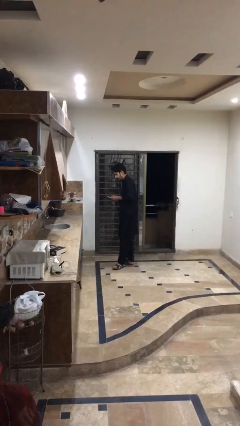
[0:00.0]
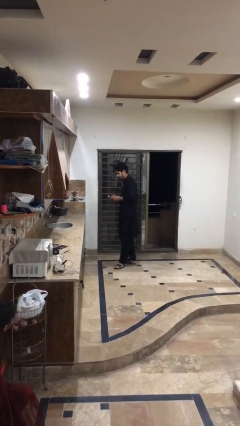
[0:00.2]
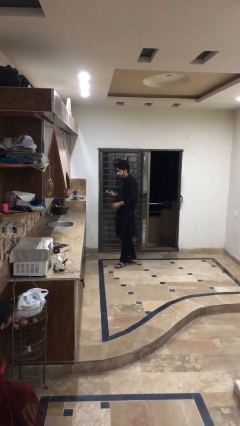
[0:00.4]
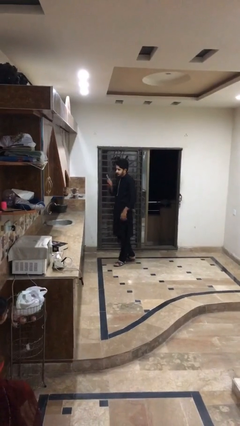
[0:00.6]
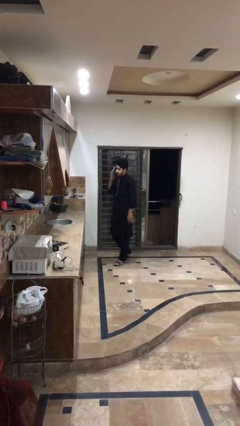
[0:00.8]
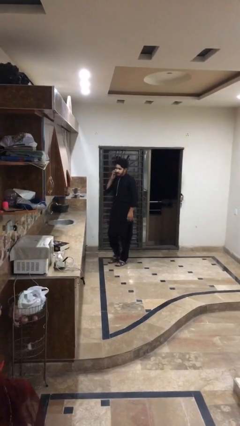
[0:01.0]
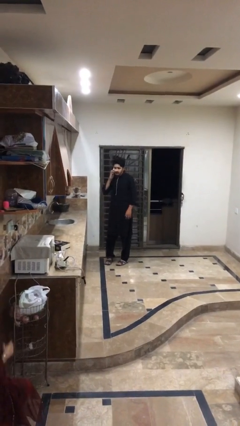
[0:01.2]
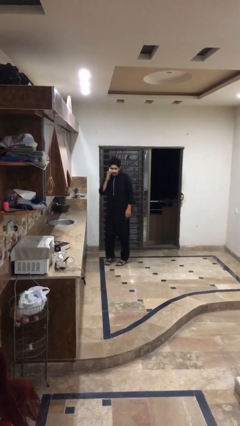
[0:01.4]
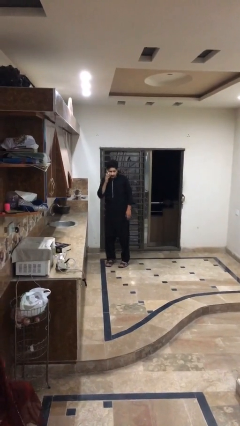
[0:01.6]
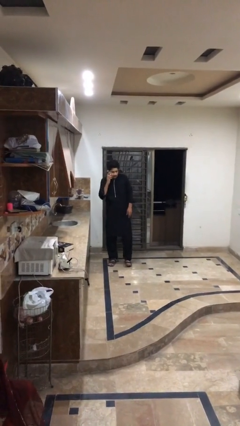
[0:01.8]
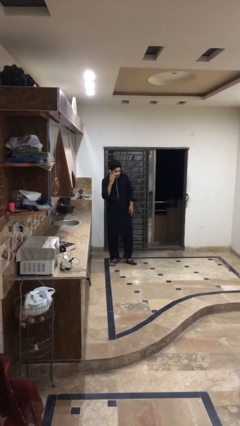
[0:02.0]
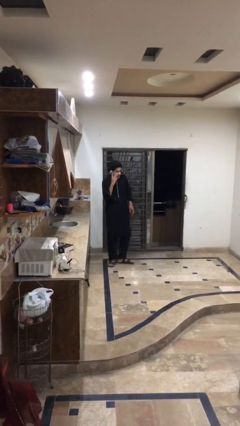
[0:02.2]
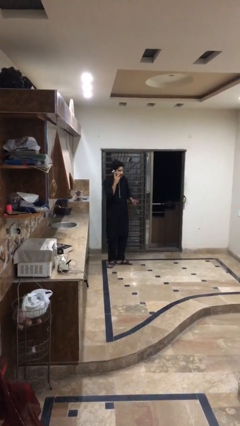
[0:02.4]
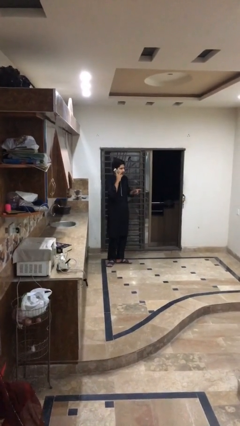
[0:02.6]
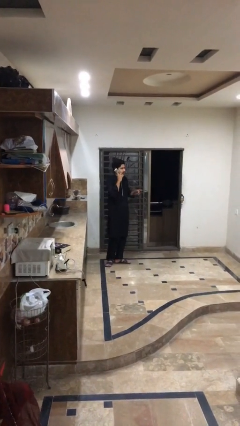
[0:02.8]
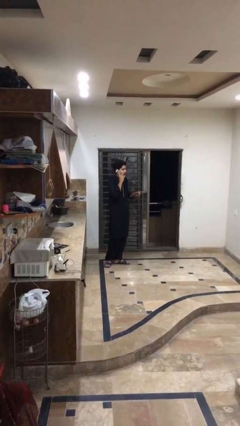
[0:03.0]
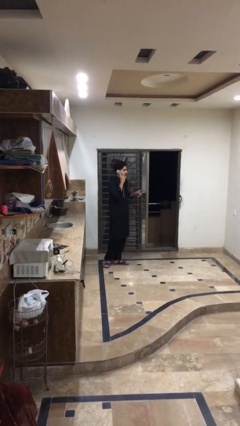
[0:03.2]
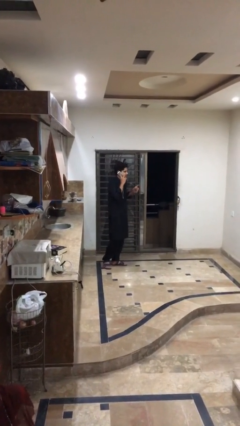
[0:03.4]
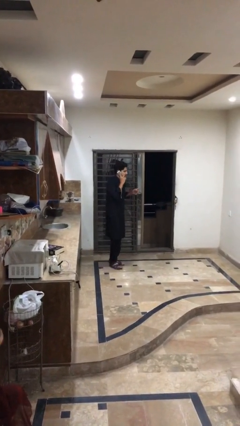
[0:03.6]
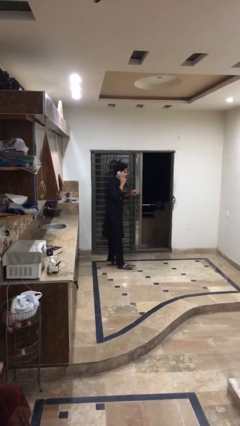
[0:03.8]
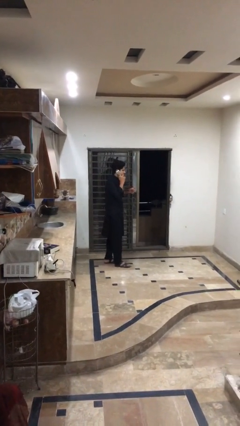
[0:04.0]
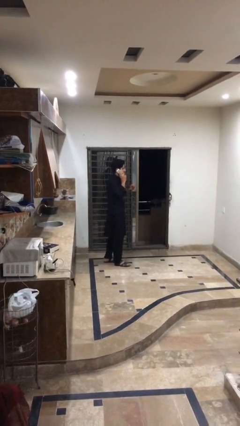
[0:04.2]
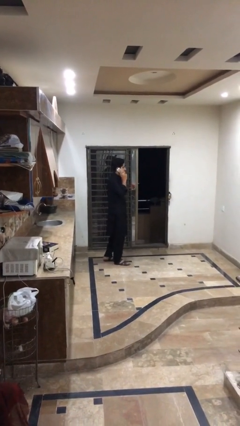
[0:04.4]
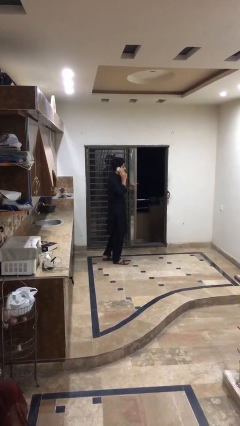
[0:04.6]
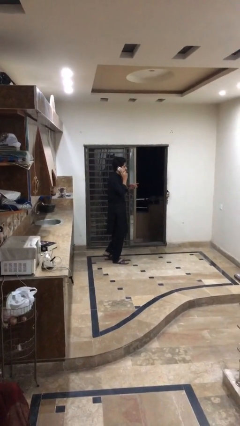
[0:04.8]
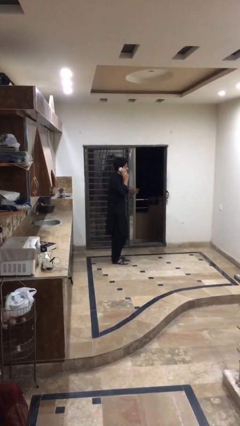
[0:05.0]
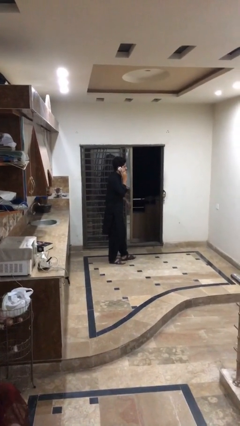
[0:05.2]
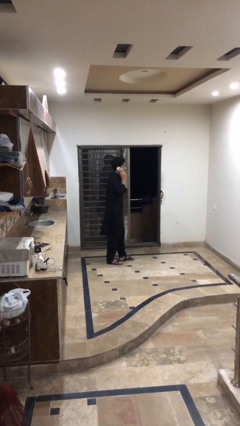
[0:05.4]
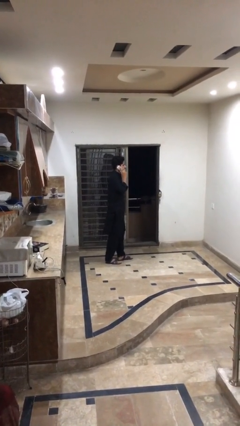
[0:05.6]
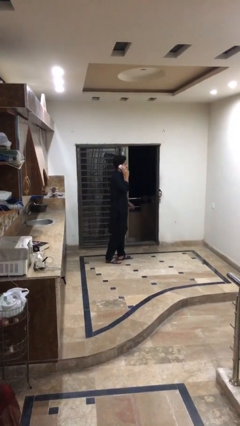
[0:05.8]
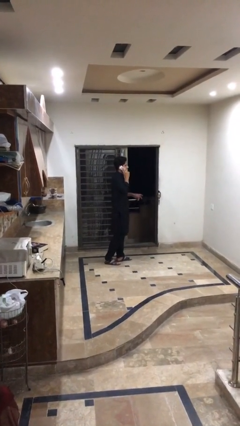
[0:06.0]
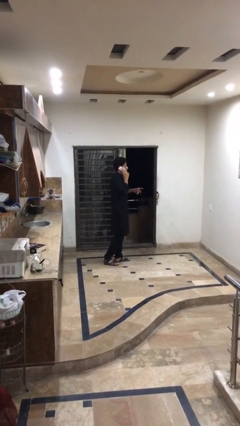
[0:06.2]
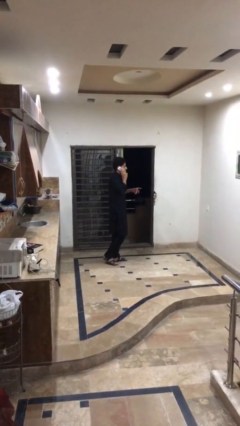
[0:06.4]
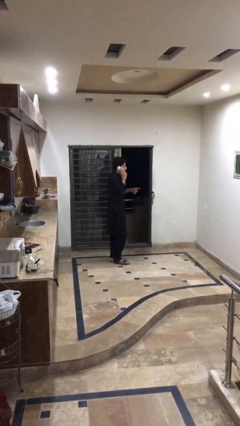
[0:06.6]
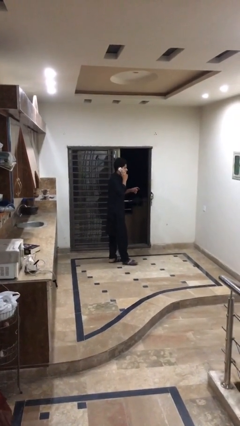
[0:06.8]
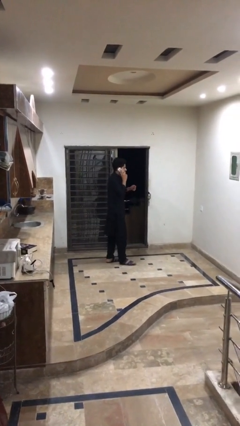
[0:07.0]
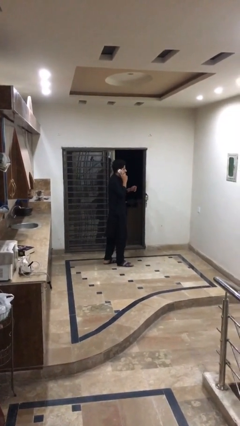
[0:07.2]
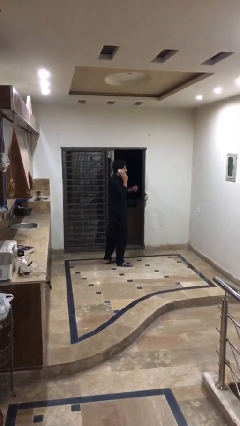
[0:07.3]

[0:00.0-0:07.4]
person talks on phone

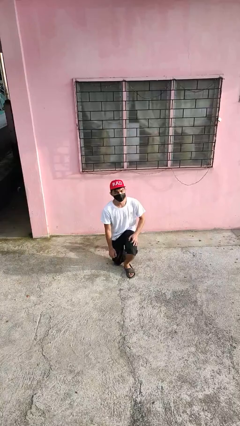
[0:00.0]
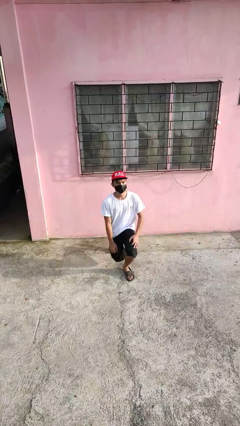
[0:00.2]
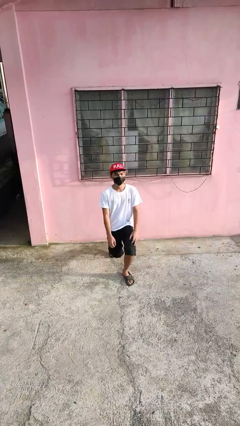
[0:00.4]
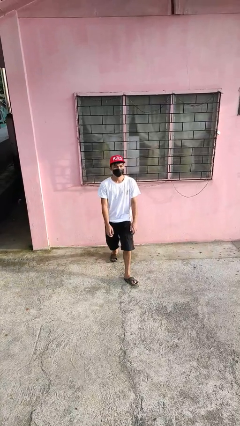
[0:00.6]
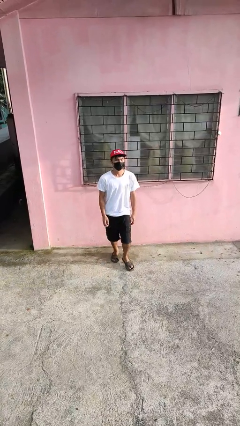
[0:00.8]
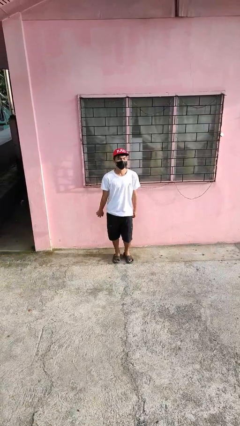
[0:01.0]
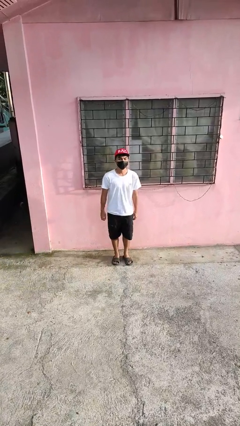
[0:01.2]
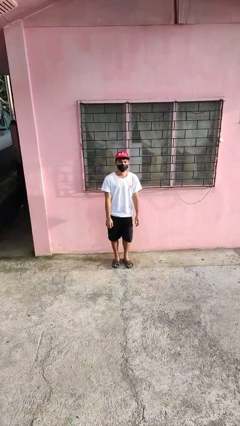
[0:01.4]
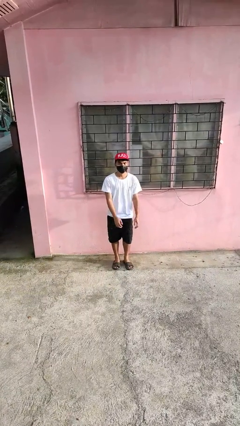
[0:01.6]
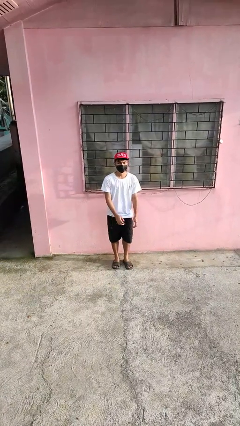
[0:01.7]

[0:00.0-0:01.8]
person stands up from floor

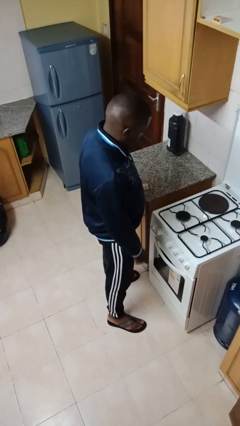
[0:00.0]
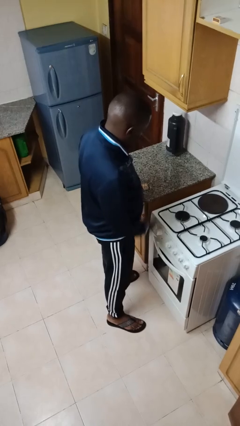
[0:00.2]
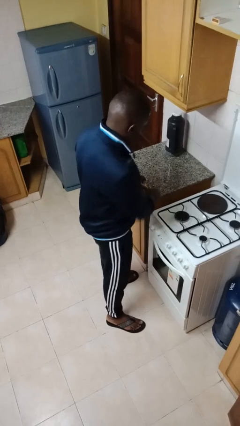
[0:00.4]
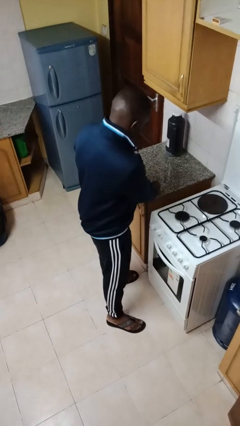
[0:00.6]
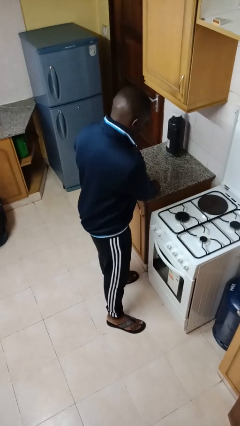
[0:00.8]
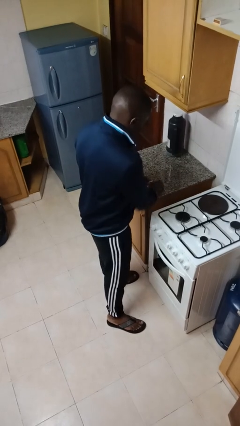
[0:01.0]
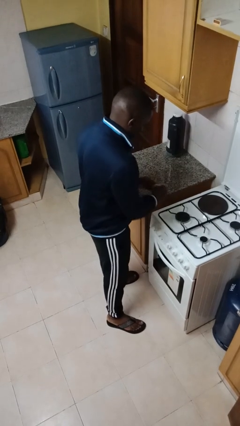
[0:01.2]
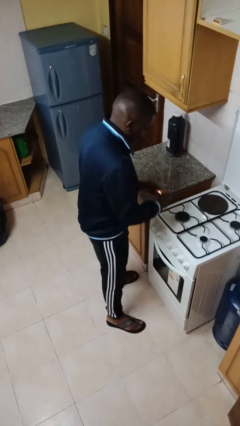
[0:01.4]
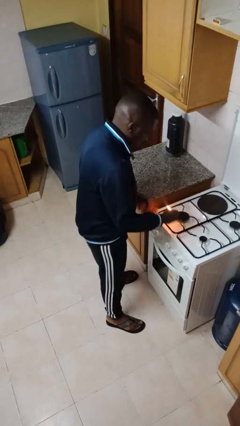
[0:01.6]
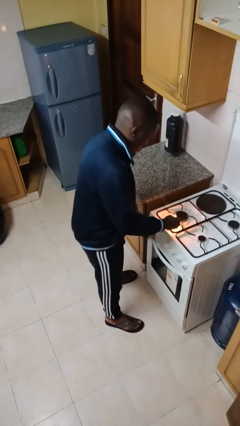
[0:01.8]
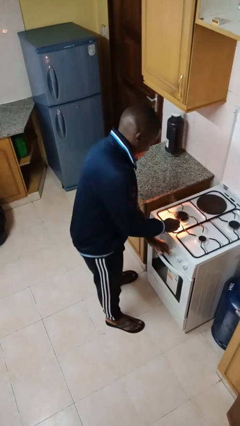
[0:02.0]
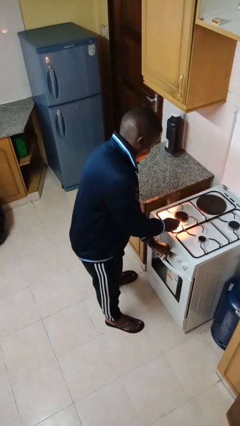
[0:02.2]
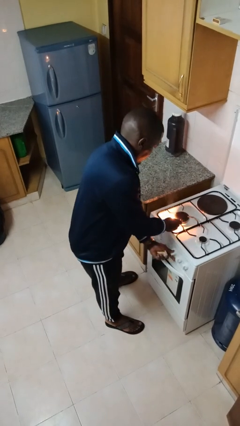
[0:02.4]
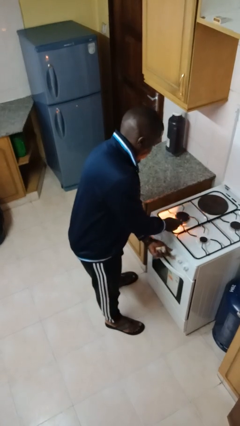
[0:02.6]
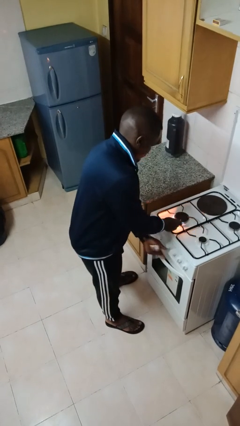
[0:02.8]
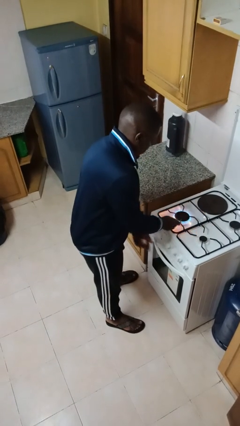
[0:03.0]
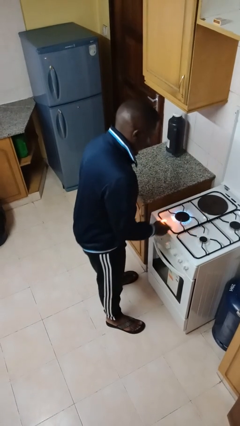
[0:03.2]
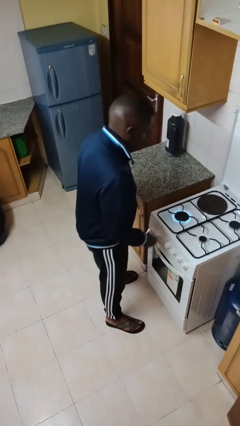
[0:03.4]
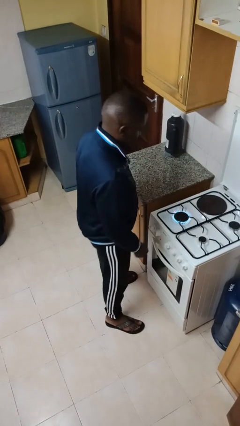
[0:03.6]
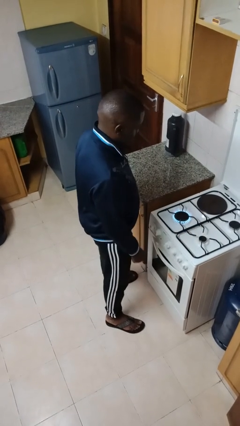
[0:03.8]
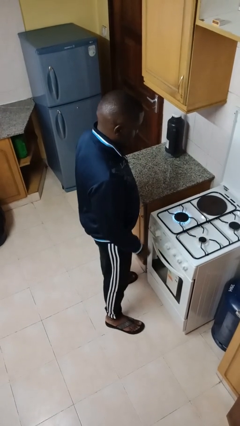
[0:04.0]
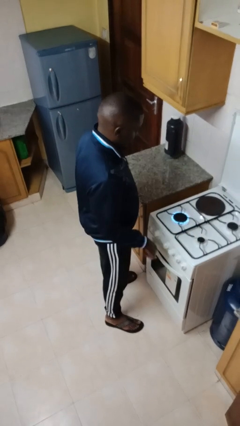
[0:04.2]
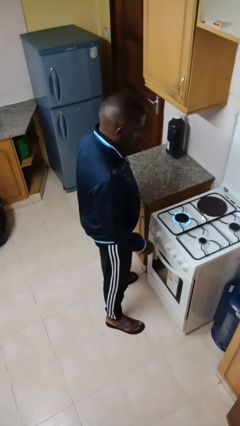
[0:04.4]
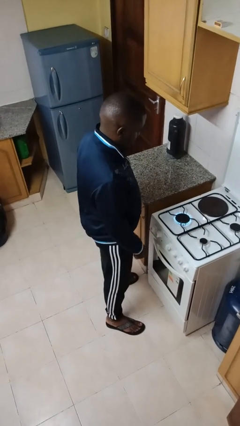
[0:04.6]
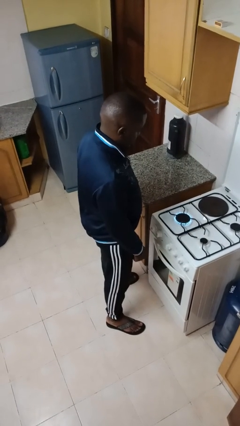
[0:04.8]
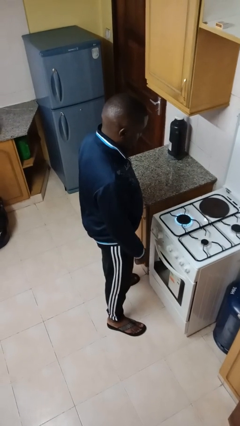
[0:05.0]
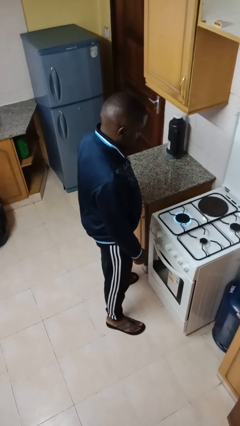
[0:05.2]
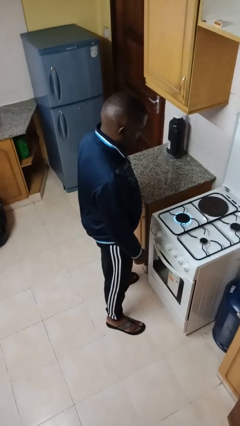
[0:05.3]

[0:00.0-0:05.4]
person turns on stovetop

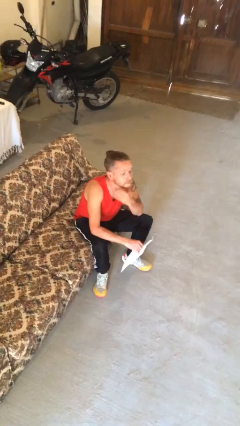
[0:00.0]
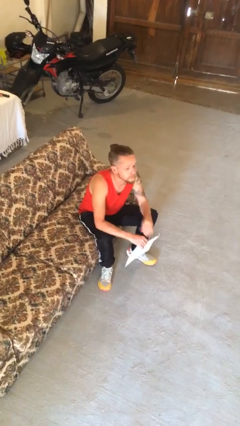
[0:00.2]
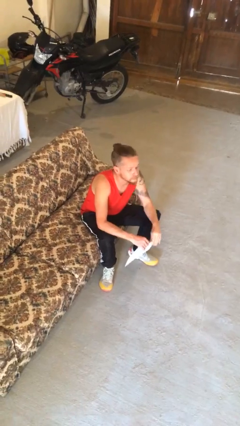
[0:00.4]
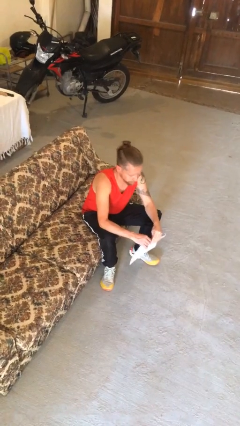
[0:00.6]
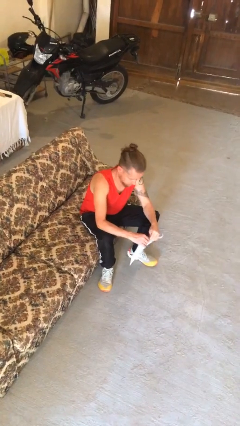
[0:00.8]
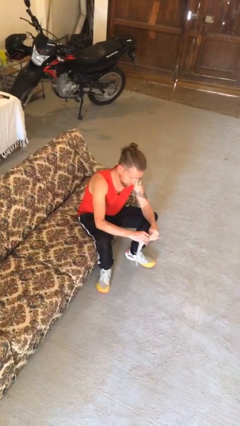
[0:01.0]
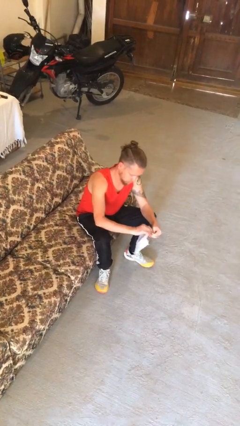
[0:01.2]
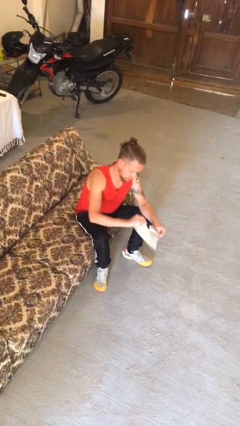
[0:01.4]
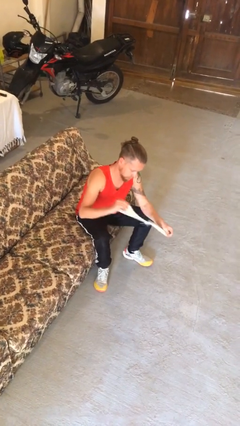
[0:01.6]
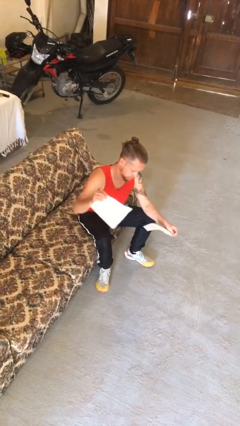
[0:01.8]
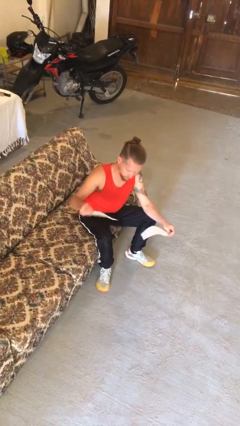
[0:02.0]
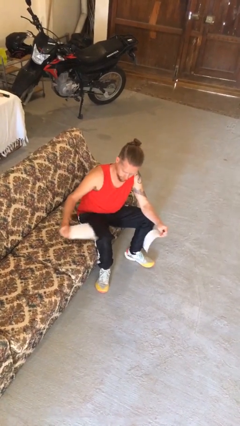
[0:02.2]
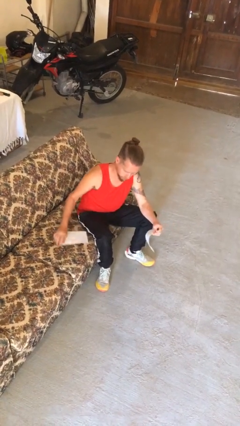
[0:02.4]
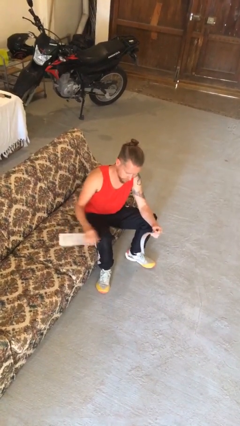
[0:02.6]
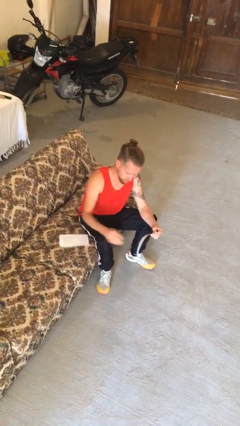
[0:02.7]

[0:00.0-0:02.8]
person tears paper

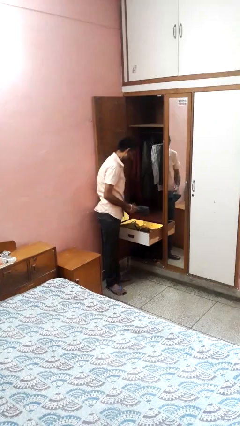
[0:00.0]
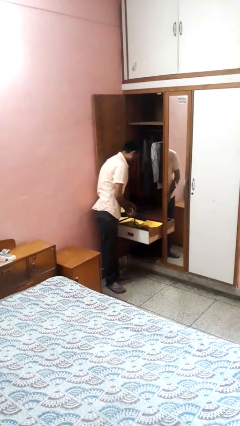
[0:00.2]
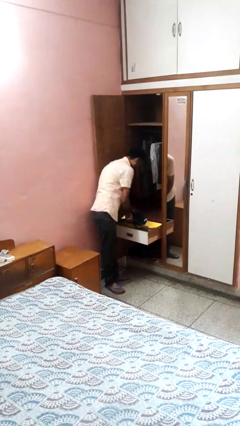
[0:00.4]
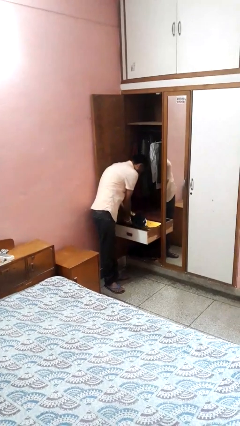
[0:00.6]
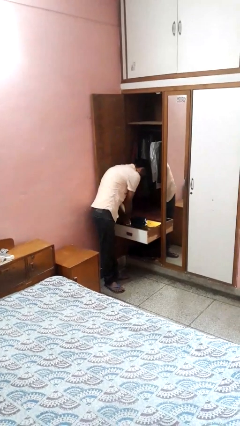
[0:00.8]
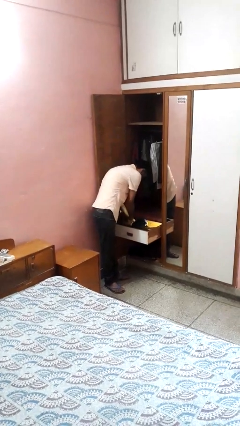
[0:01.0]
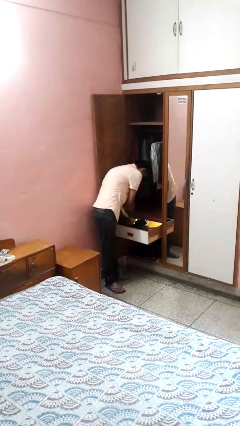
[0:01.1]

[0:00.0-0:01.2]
person puts clothes into dresser
